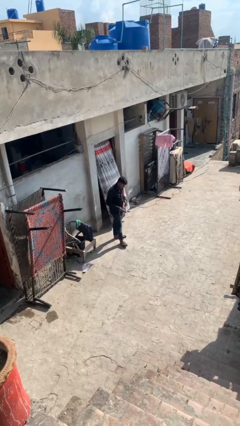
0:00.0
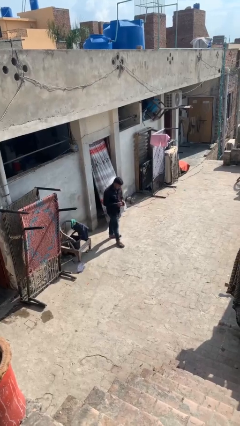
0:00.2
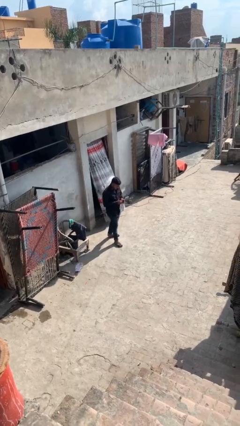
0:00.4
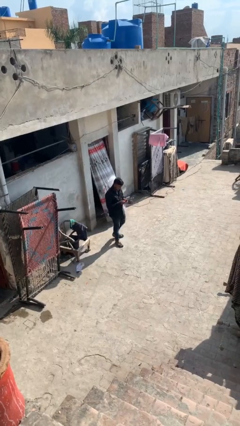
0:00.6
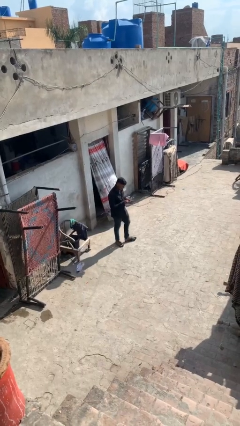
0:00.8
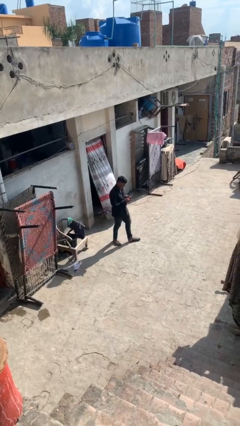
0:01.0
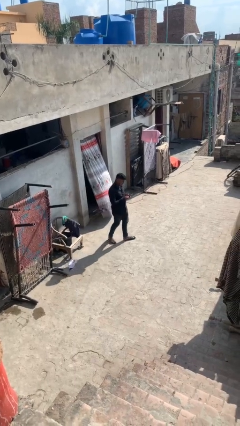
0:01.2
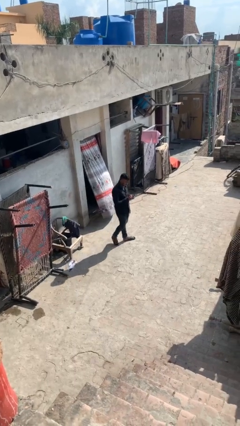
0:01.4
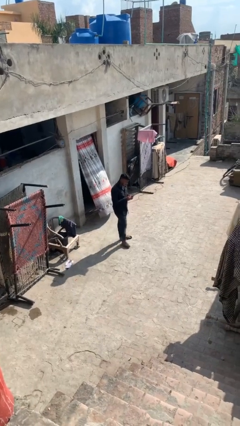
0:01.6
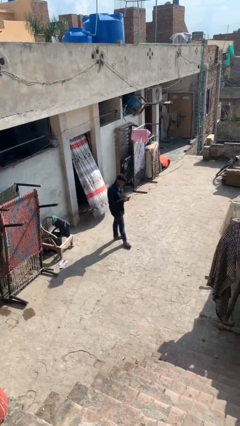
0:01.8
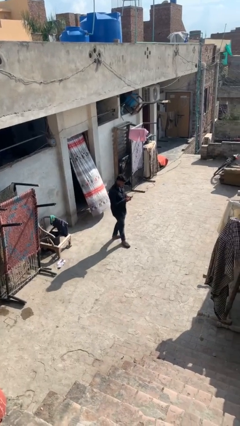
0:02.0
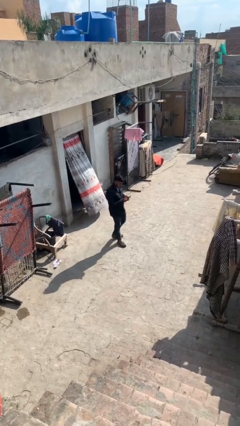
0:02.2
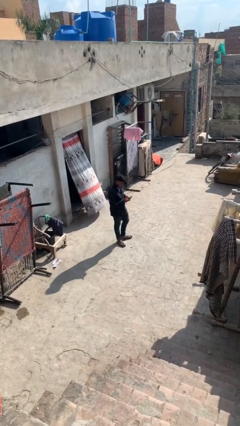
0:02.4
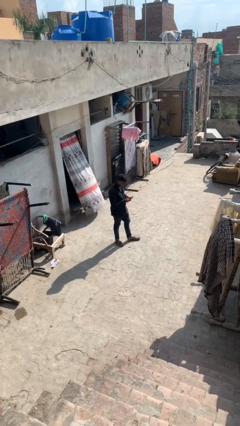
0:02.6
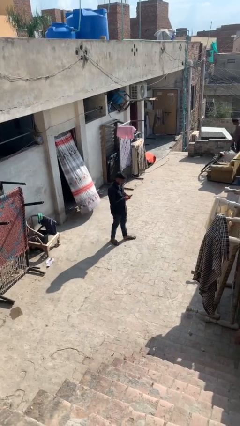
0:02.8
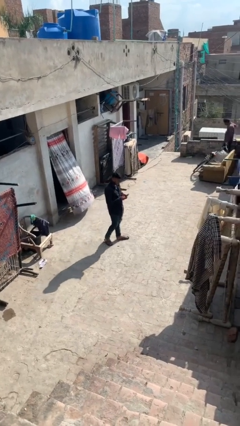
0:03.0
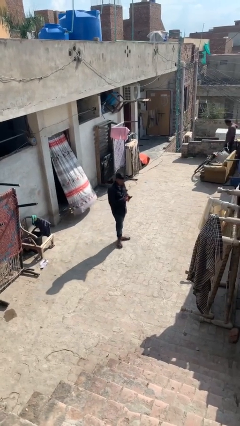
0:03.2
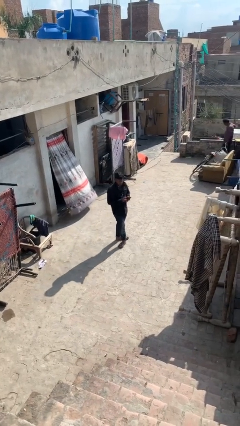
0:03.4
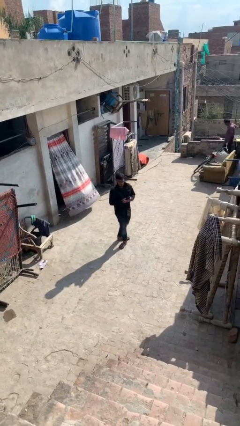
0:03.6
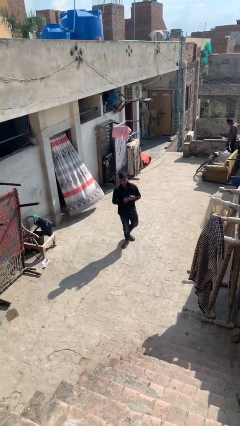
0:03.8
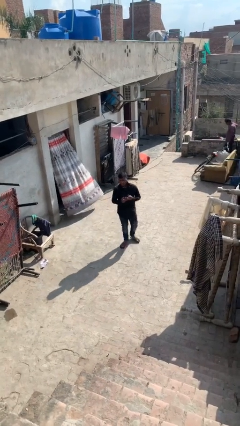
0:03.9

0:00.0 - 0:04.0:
person texts on phone

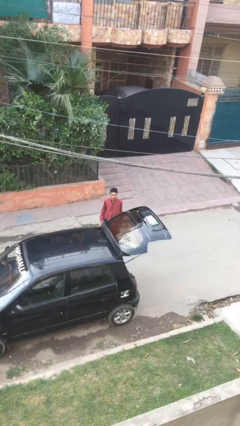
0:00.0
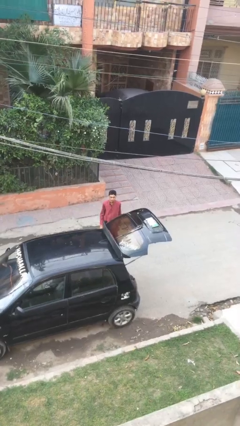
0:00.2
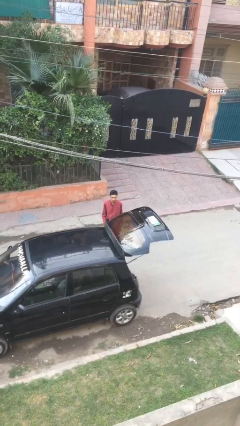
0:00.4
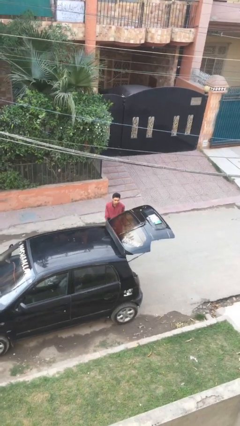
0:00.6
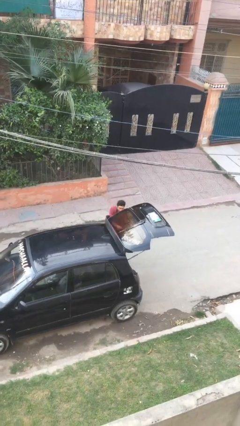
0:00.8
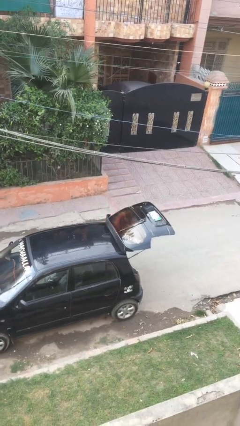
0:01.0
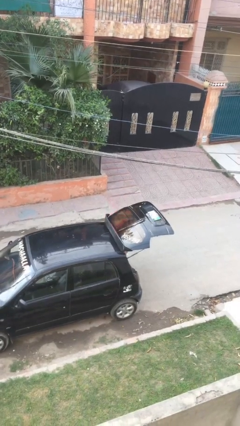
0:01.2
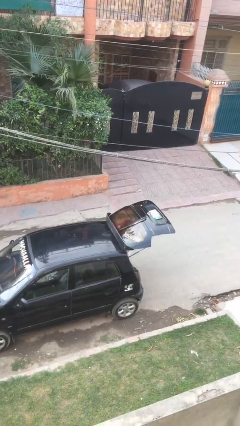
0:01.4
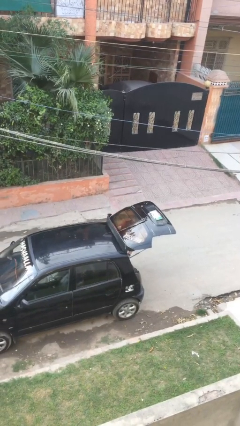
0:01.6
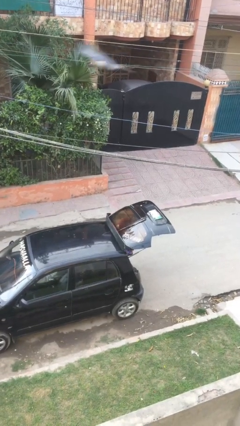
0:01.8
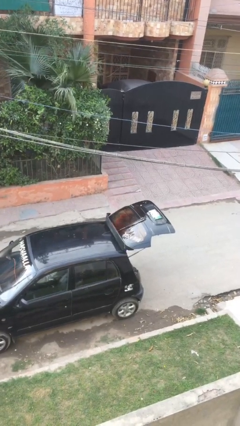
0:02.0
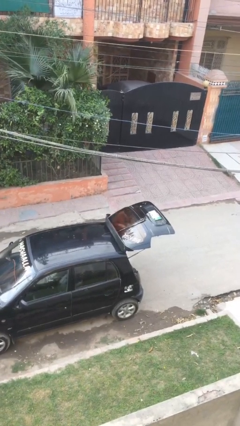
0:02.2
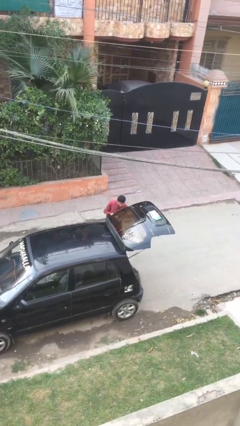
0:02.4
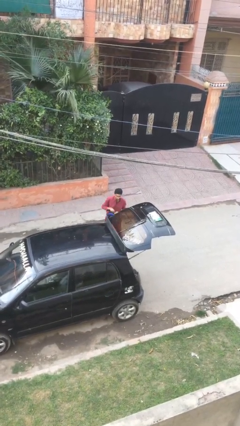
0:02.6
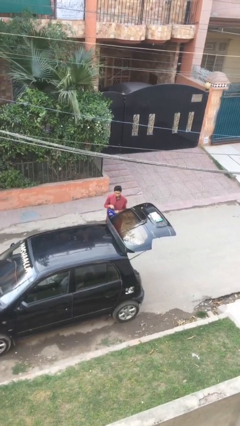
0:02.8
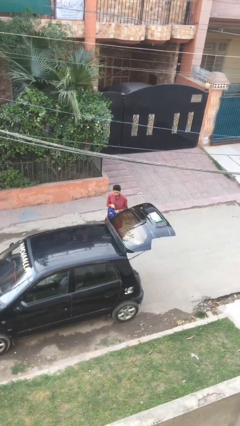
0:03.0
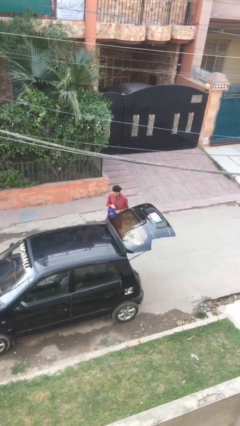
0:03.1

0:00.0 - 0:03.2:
person unloads car

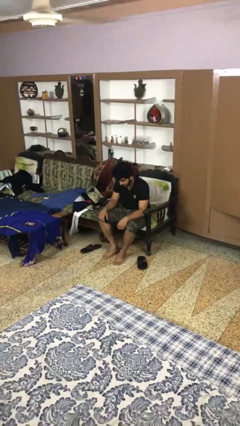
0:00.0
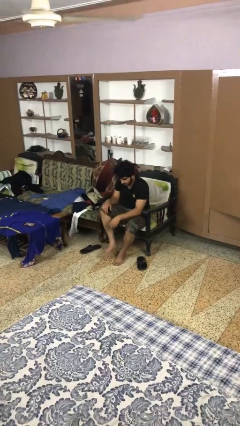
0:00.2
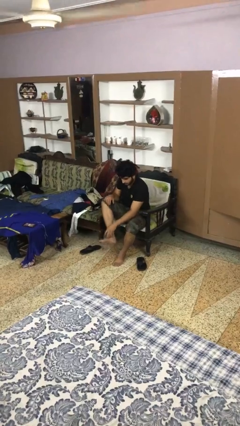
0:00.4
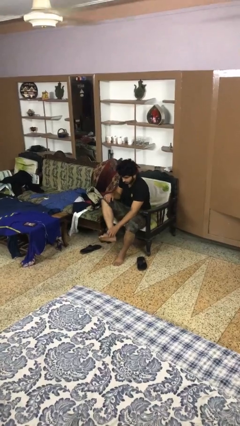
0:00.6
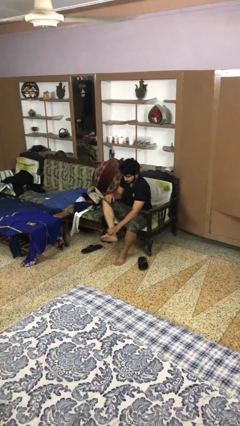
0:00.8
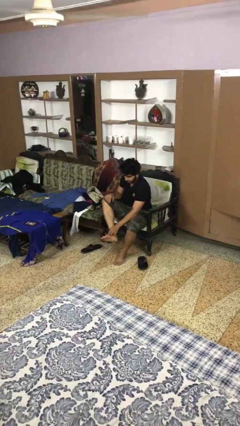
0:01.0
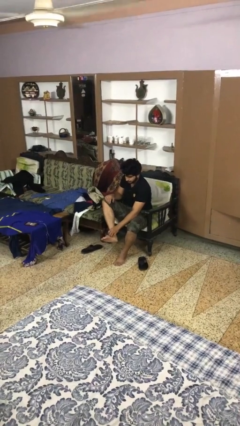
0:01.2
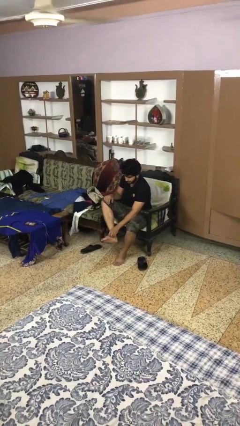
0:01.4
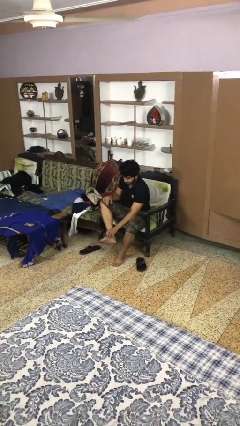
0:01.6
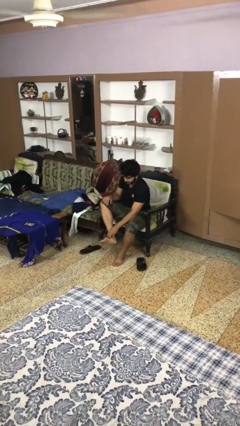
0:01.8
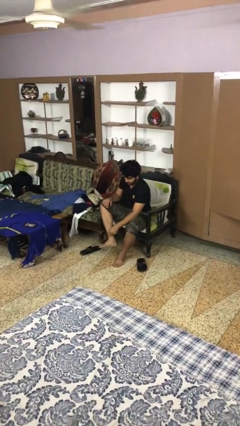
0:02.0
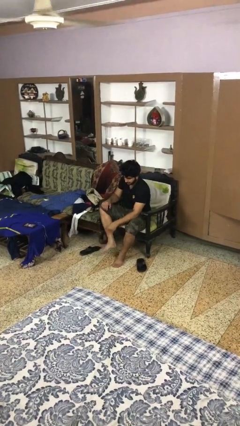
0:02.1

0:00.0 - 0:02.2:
person rubs foot

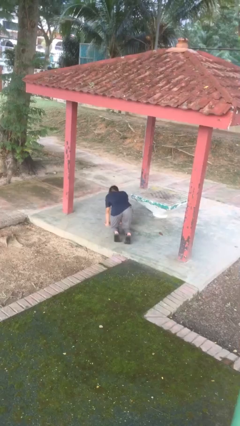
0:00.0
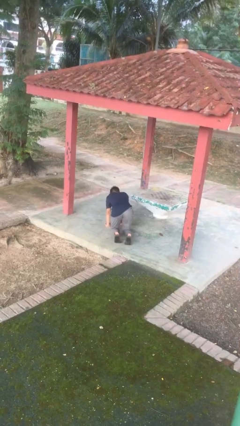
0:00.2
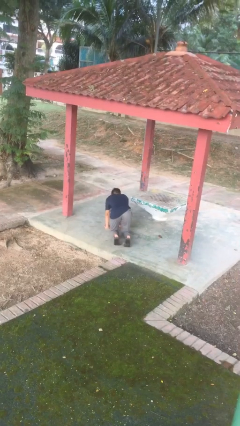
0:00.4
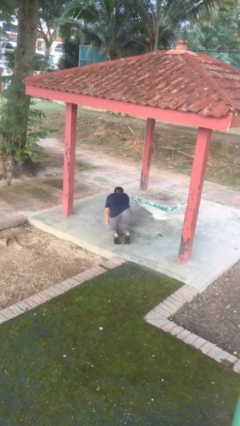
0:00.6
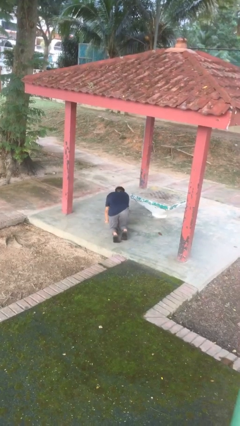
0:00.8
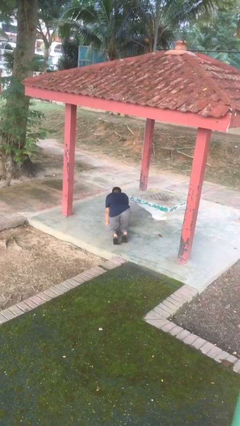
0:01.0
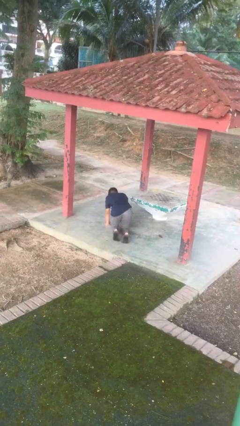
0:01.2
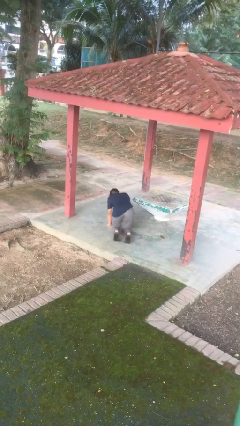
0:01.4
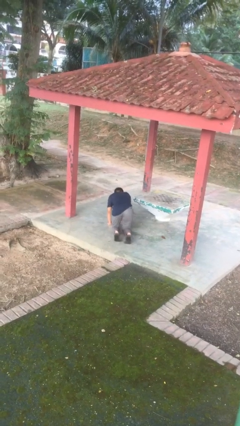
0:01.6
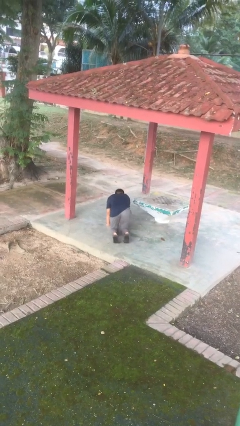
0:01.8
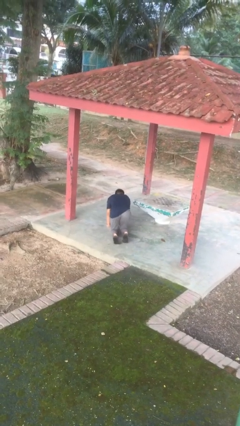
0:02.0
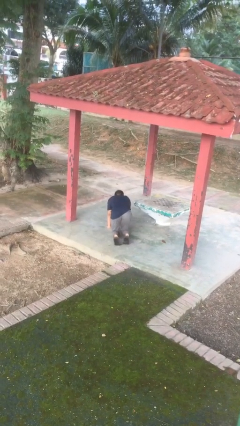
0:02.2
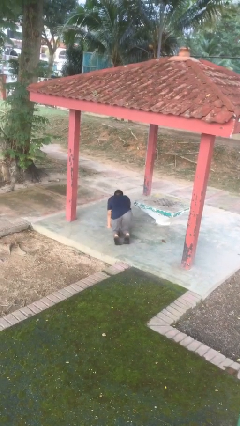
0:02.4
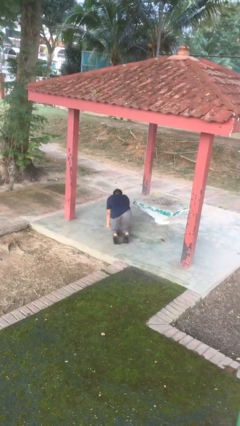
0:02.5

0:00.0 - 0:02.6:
person crawls

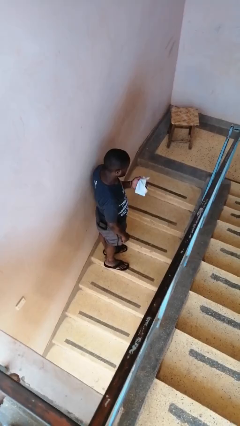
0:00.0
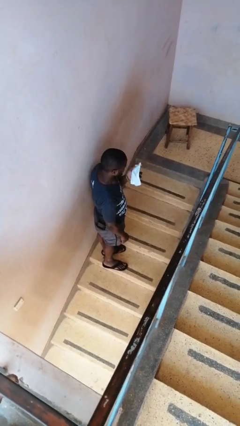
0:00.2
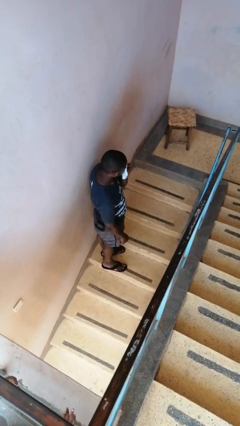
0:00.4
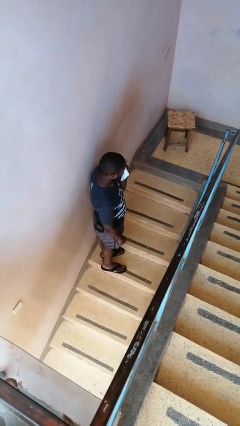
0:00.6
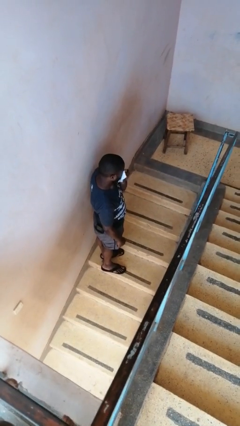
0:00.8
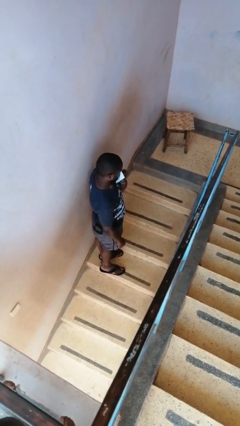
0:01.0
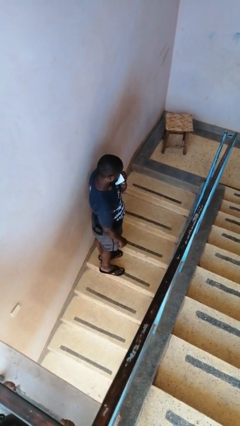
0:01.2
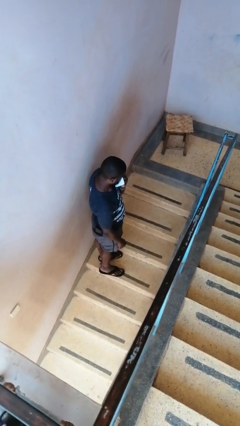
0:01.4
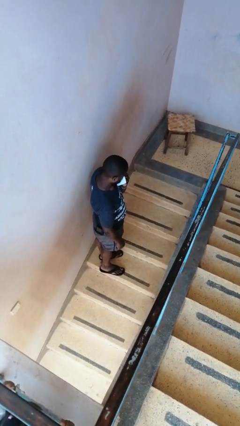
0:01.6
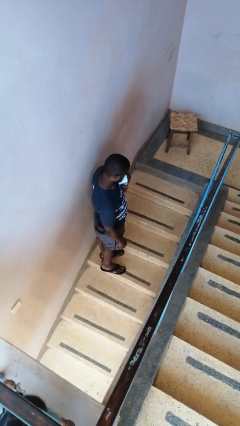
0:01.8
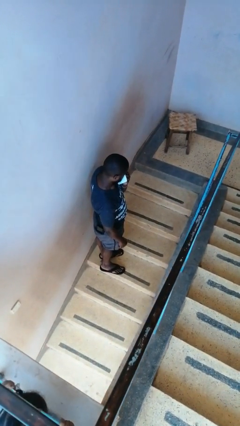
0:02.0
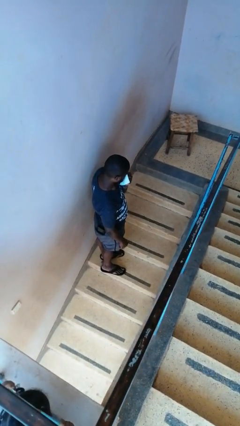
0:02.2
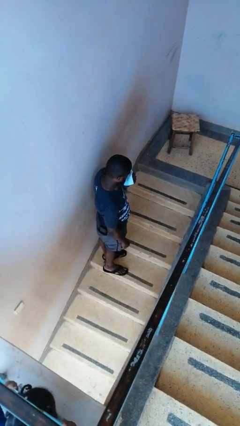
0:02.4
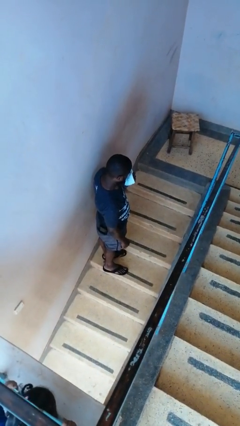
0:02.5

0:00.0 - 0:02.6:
person blows nose

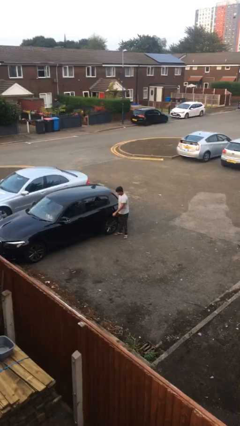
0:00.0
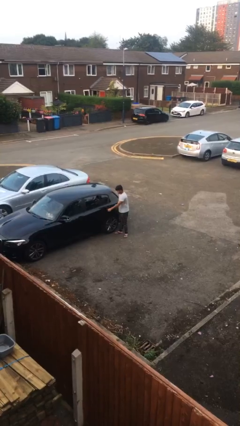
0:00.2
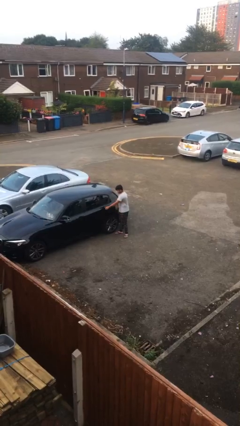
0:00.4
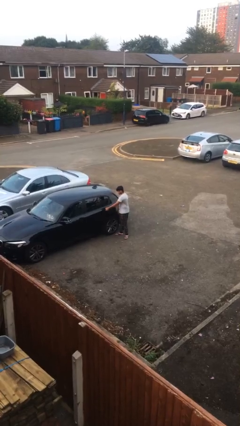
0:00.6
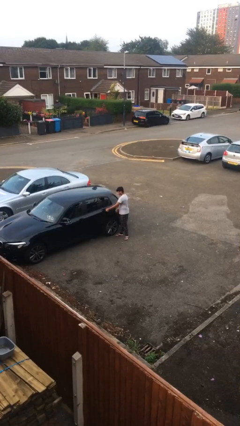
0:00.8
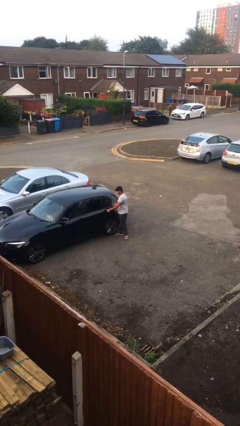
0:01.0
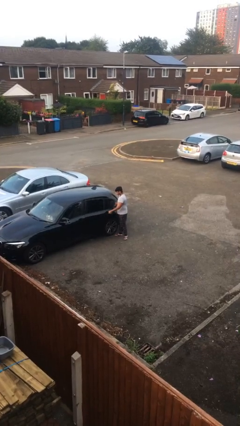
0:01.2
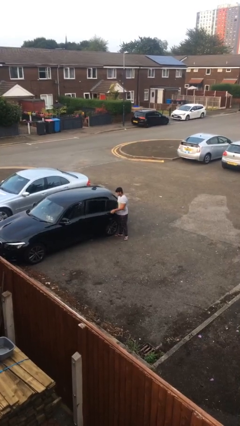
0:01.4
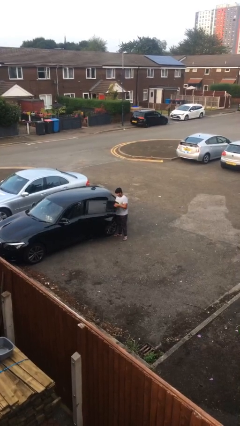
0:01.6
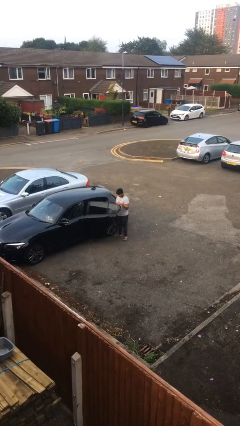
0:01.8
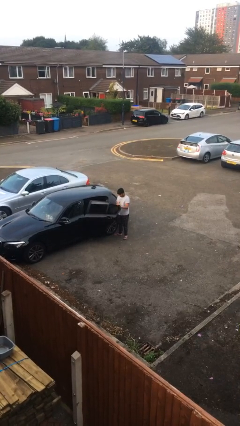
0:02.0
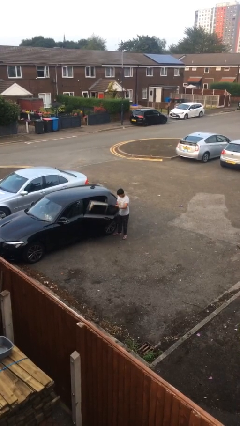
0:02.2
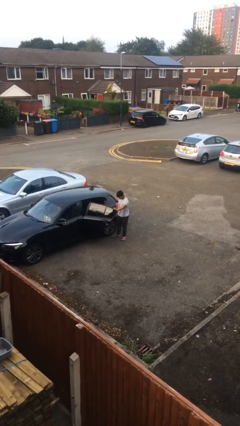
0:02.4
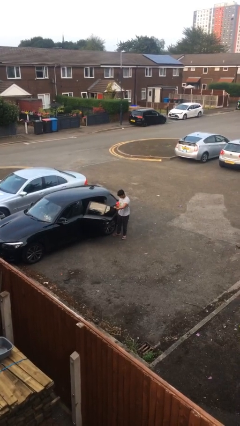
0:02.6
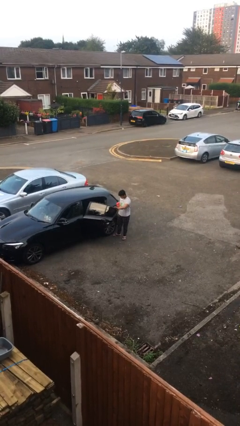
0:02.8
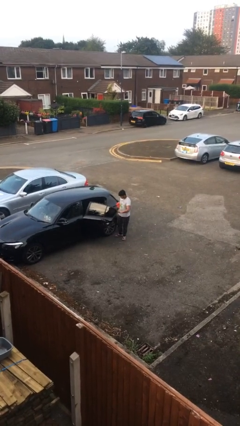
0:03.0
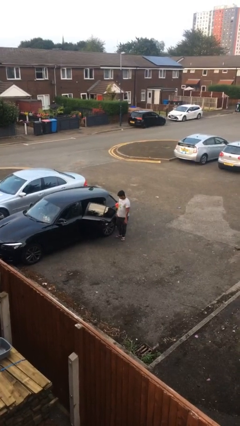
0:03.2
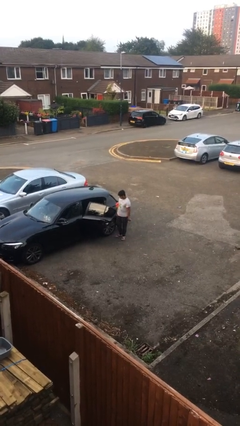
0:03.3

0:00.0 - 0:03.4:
person opens car door
